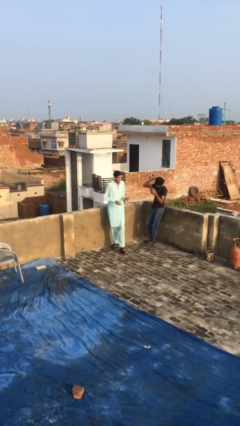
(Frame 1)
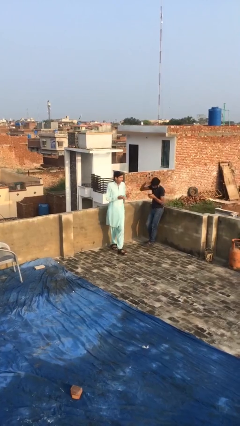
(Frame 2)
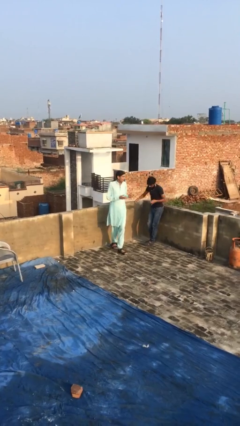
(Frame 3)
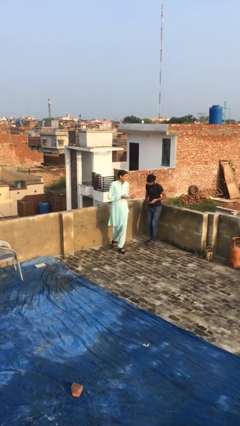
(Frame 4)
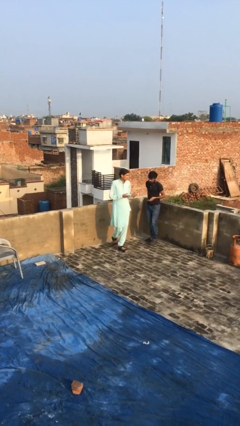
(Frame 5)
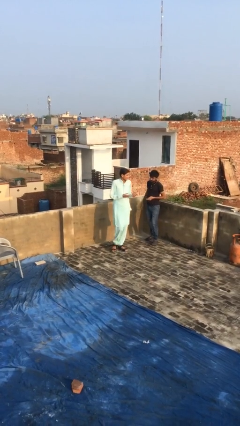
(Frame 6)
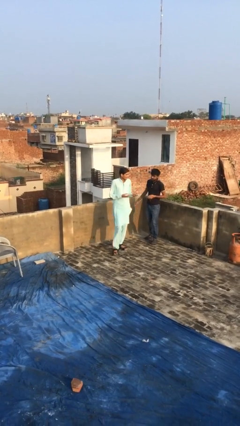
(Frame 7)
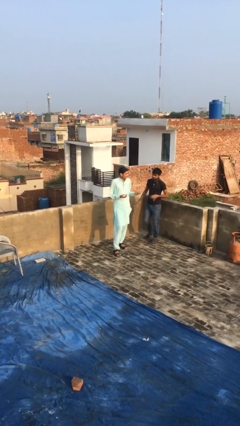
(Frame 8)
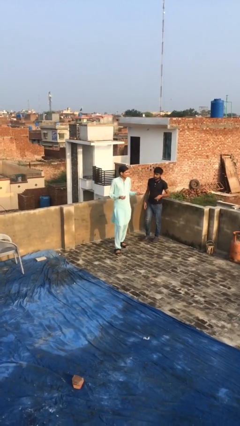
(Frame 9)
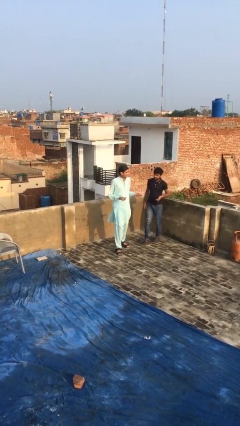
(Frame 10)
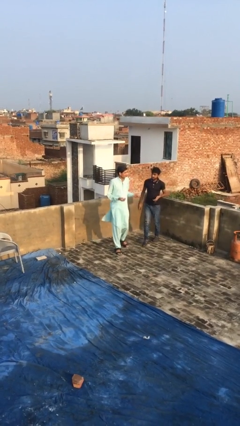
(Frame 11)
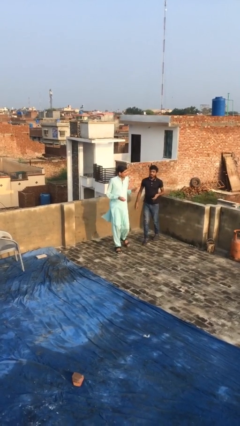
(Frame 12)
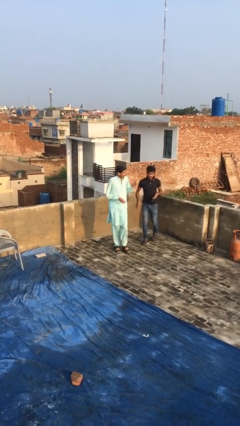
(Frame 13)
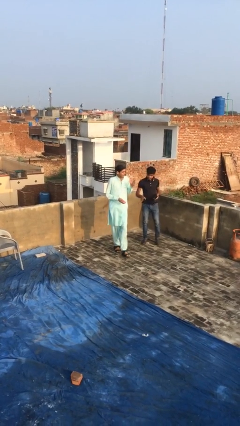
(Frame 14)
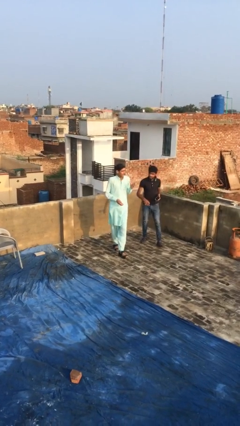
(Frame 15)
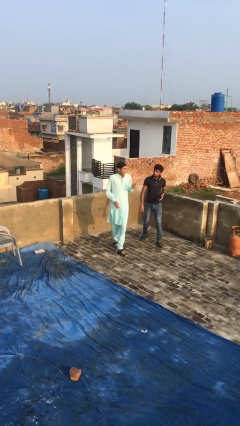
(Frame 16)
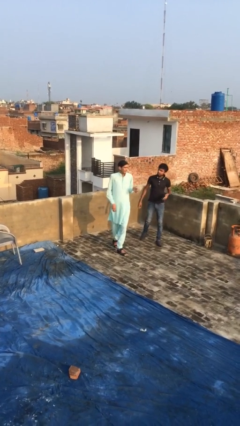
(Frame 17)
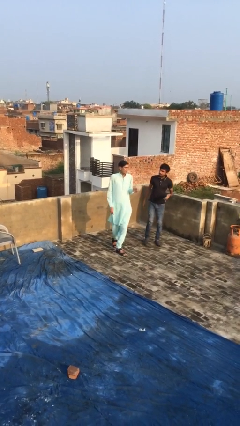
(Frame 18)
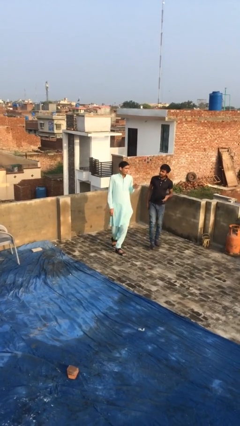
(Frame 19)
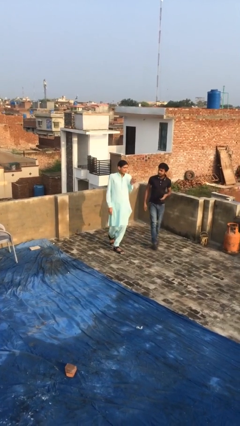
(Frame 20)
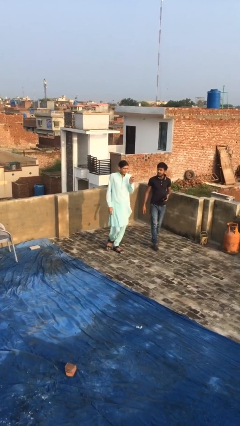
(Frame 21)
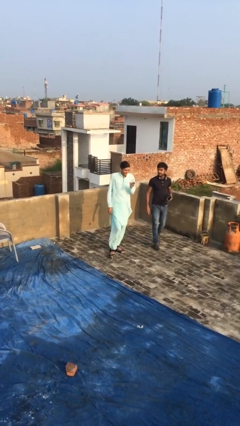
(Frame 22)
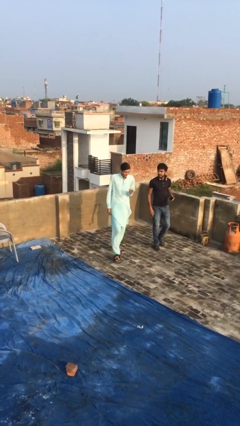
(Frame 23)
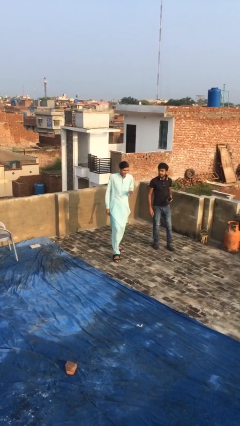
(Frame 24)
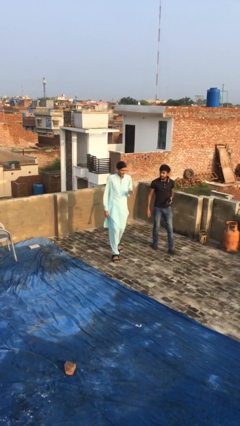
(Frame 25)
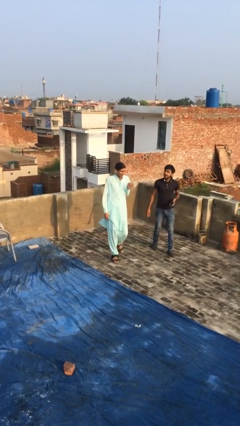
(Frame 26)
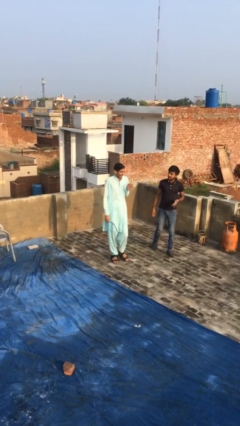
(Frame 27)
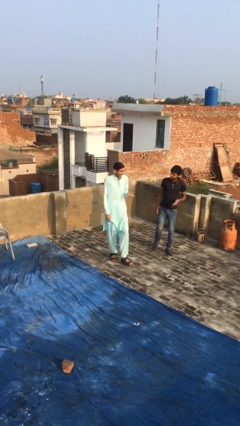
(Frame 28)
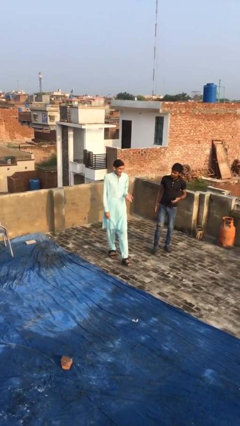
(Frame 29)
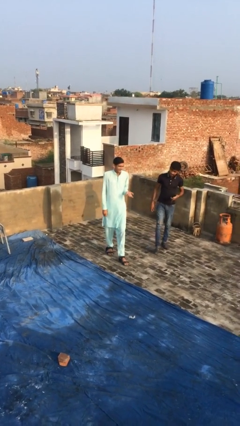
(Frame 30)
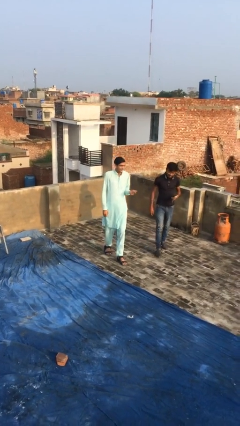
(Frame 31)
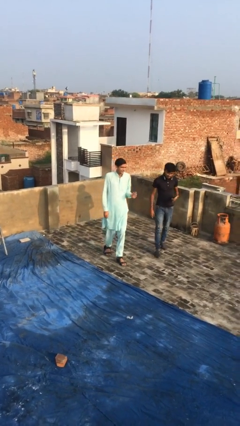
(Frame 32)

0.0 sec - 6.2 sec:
person talks to person

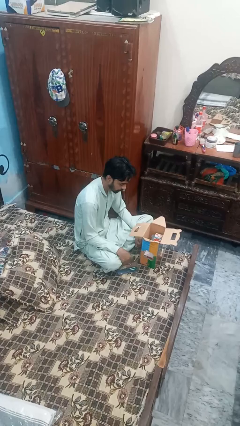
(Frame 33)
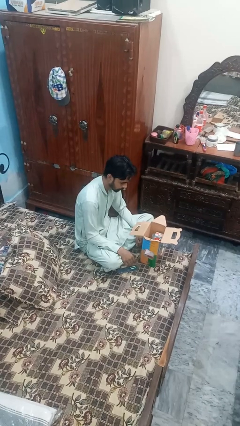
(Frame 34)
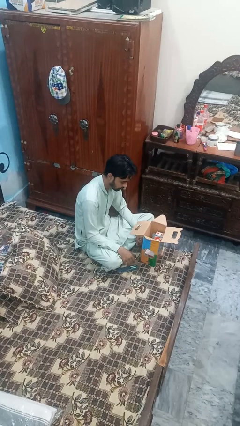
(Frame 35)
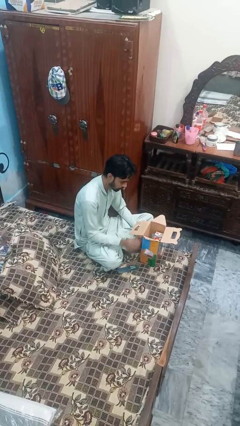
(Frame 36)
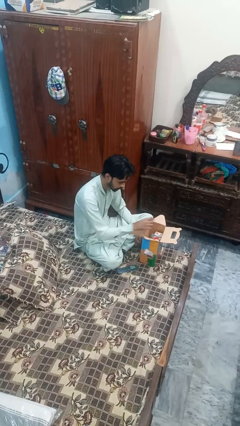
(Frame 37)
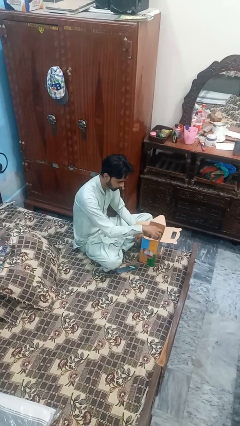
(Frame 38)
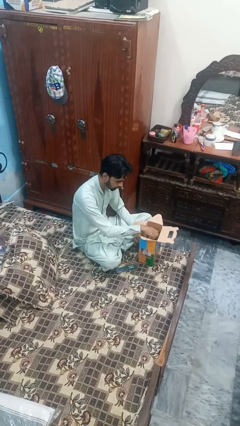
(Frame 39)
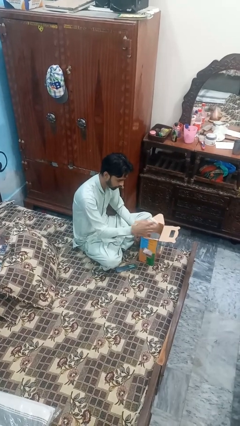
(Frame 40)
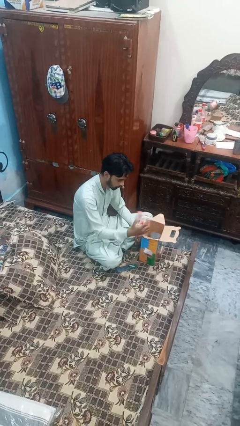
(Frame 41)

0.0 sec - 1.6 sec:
person takes object from box

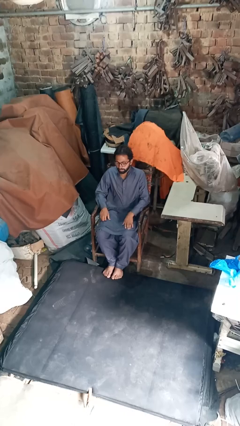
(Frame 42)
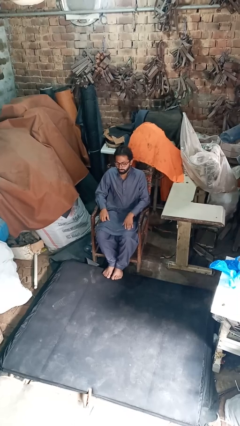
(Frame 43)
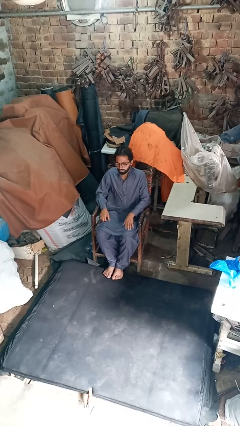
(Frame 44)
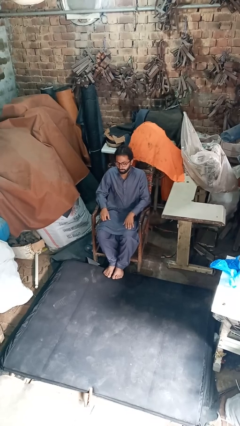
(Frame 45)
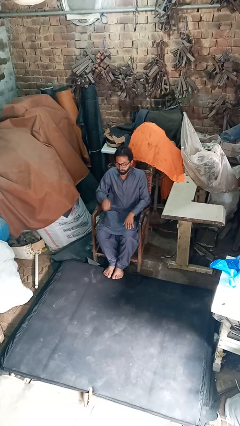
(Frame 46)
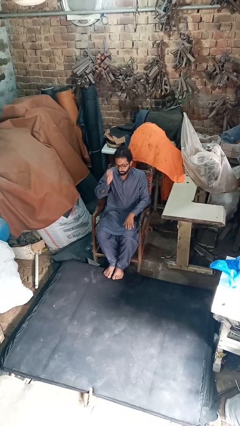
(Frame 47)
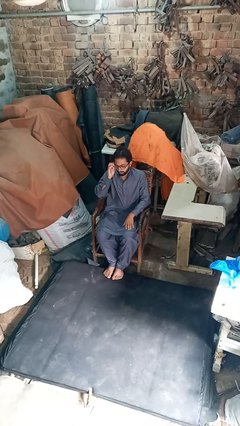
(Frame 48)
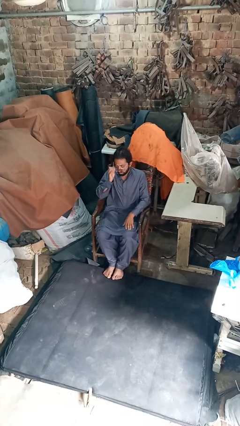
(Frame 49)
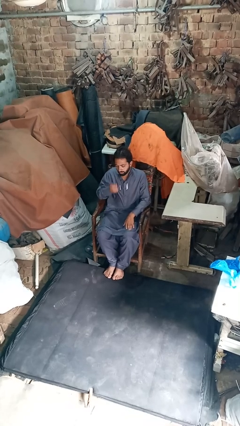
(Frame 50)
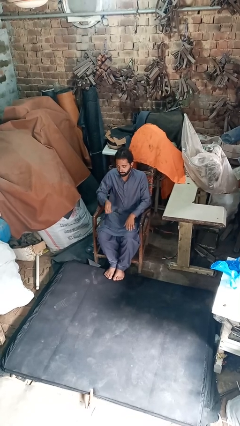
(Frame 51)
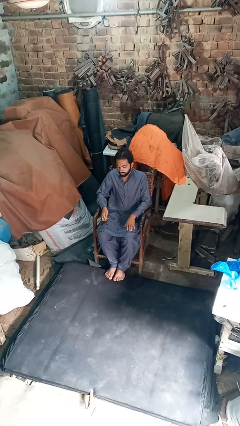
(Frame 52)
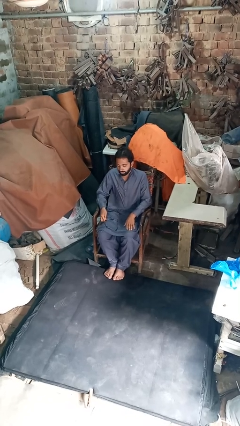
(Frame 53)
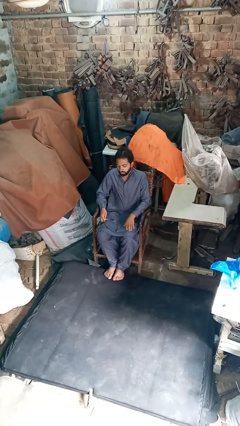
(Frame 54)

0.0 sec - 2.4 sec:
person takes off glasses

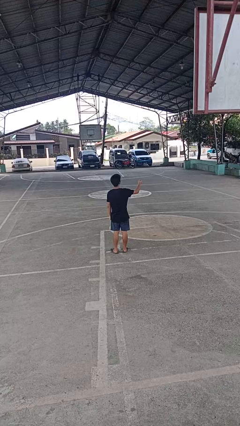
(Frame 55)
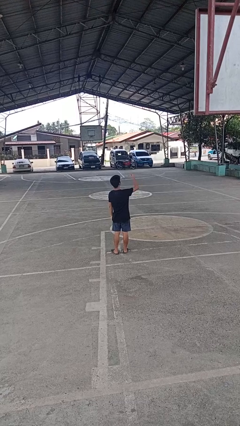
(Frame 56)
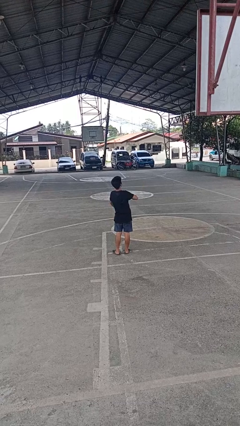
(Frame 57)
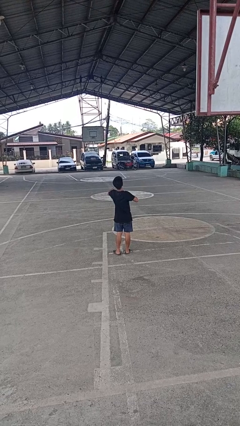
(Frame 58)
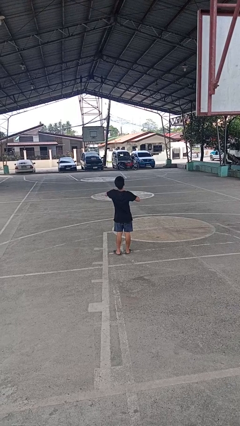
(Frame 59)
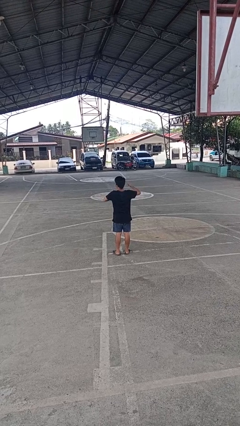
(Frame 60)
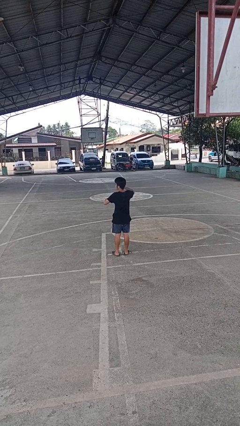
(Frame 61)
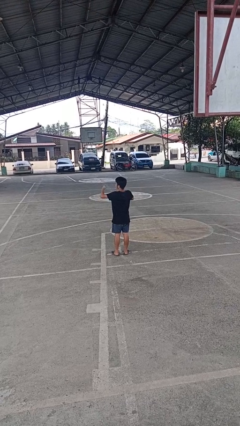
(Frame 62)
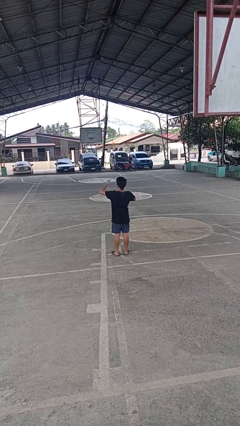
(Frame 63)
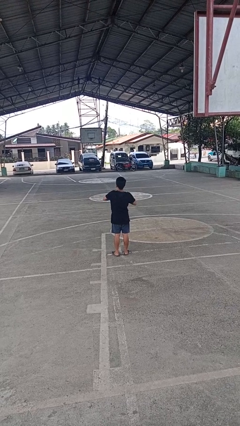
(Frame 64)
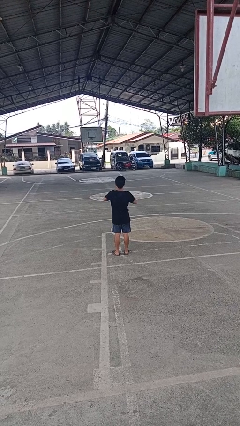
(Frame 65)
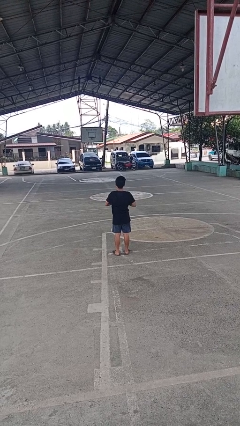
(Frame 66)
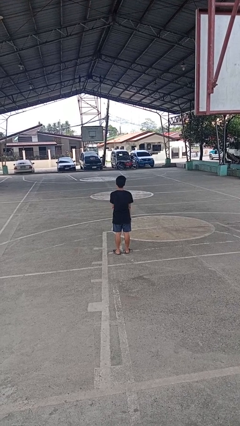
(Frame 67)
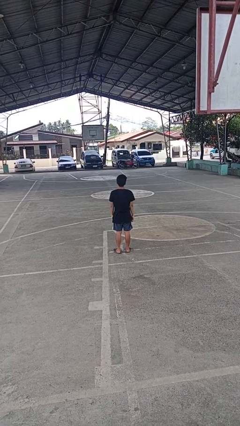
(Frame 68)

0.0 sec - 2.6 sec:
person drums on chest

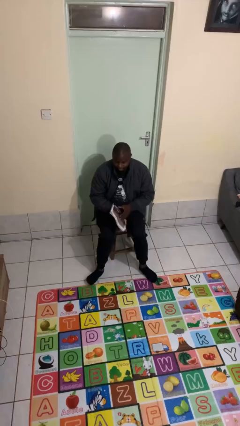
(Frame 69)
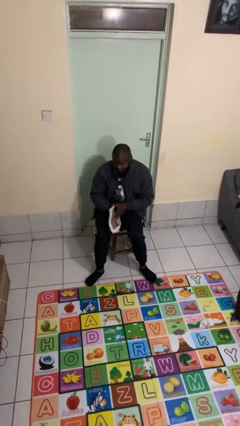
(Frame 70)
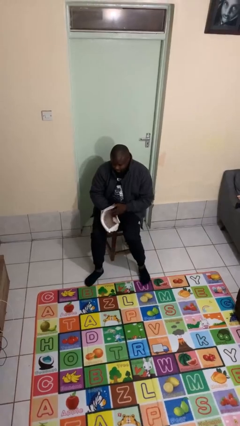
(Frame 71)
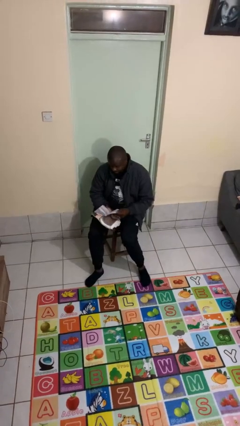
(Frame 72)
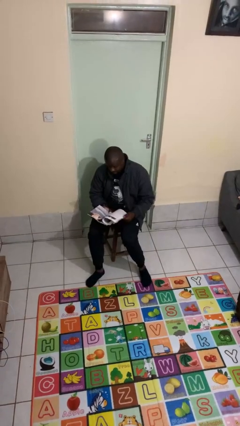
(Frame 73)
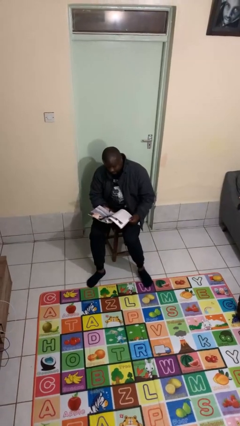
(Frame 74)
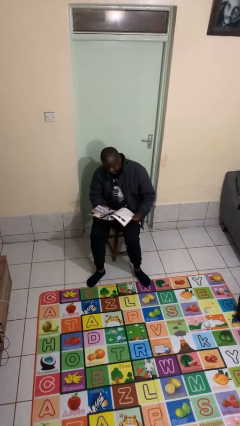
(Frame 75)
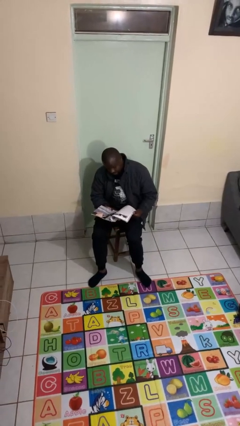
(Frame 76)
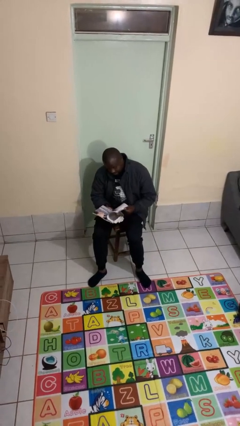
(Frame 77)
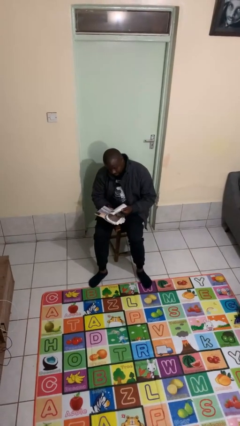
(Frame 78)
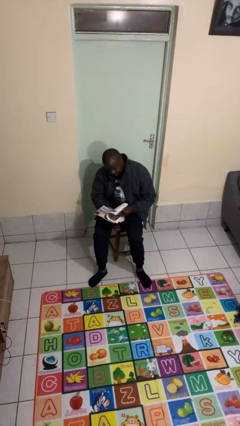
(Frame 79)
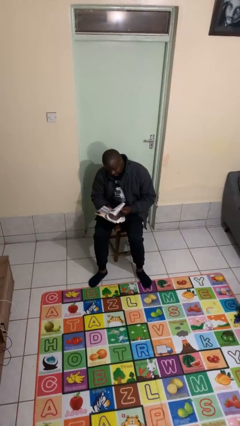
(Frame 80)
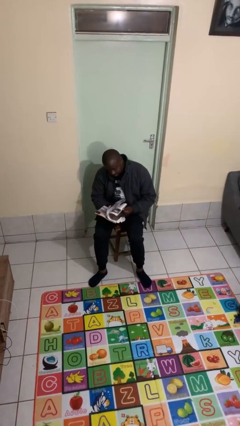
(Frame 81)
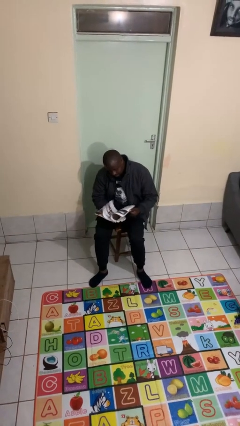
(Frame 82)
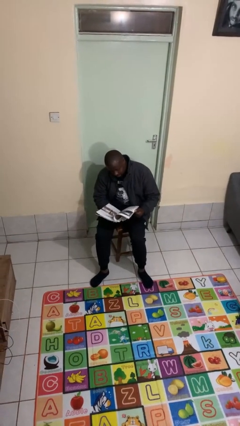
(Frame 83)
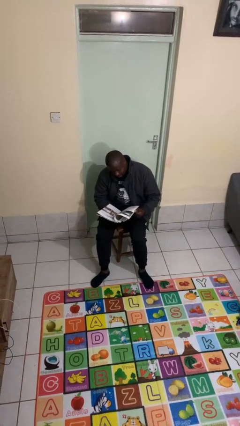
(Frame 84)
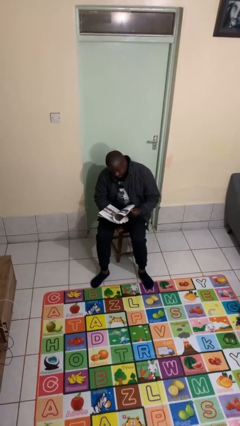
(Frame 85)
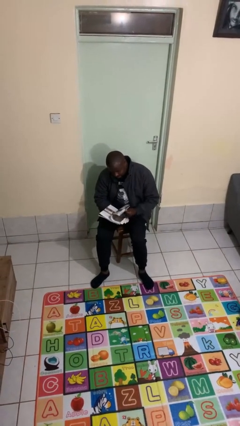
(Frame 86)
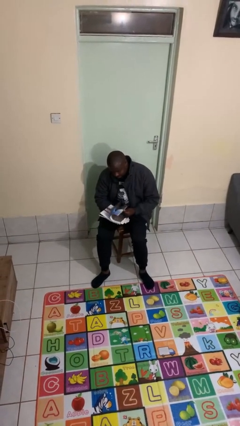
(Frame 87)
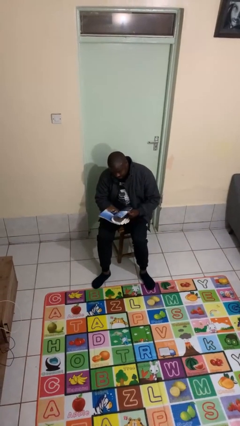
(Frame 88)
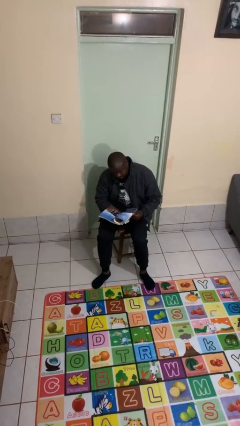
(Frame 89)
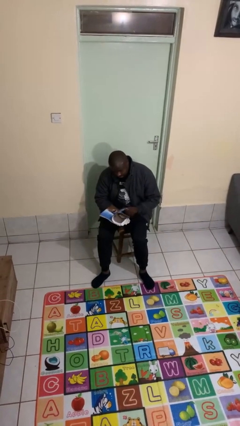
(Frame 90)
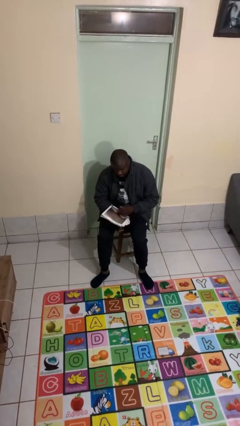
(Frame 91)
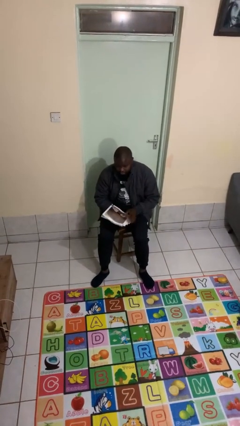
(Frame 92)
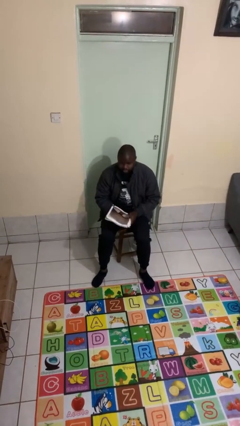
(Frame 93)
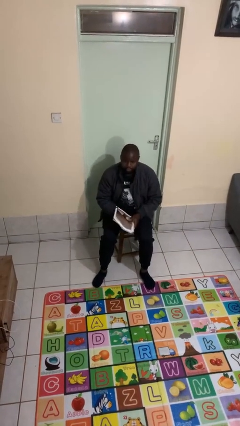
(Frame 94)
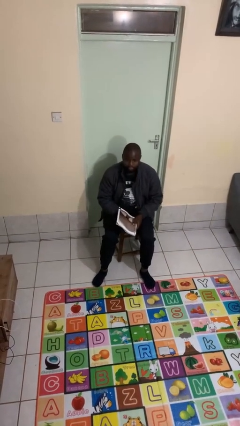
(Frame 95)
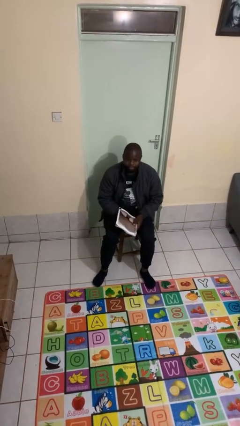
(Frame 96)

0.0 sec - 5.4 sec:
person reads magazine
